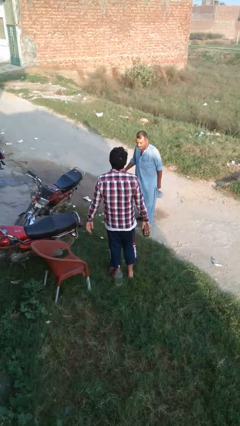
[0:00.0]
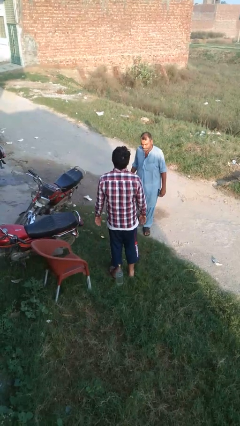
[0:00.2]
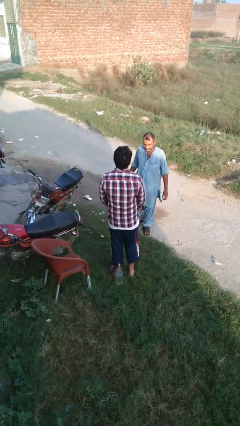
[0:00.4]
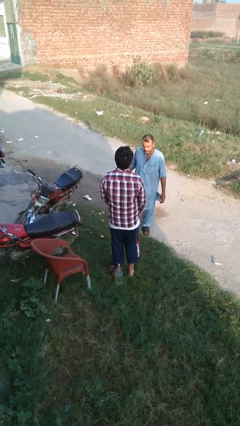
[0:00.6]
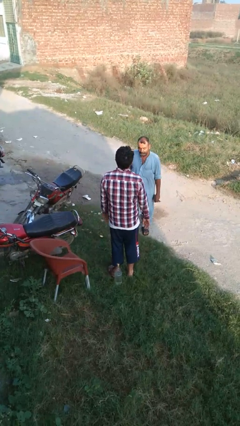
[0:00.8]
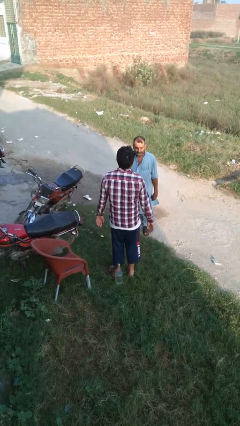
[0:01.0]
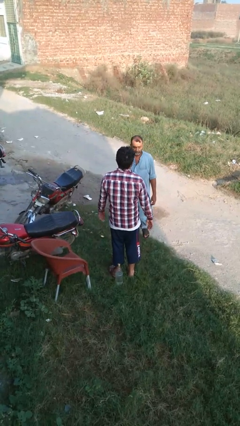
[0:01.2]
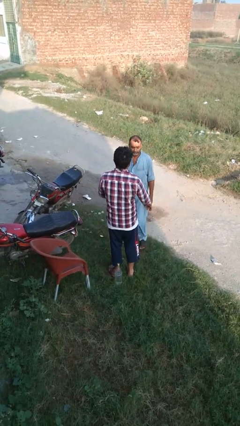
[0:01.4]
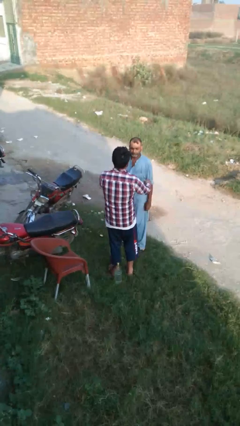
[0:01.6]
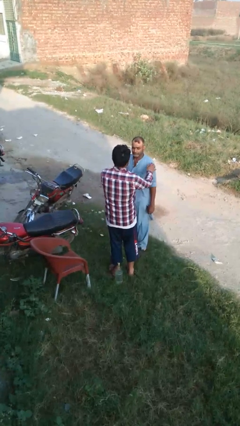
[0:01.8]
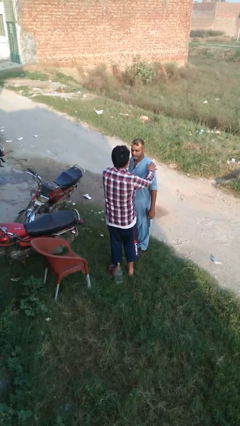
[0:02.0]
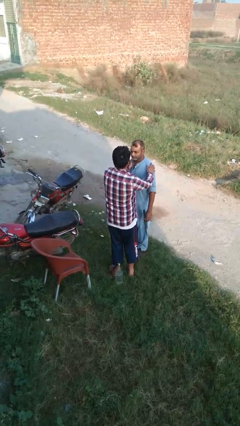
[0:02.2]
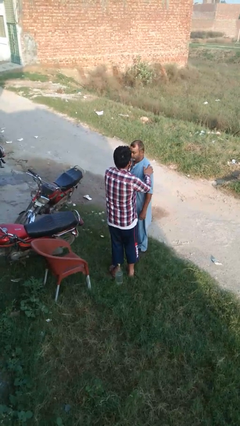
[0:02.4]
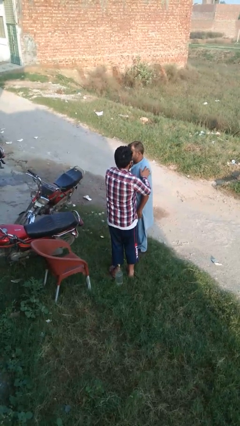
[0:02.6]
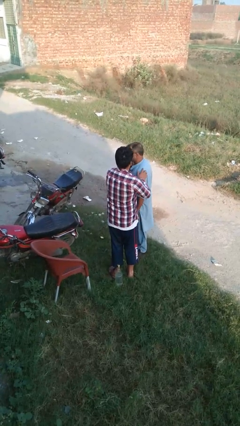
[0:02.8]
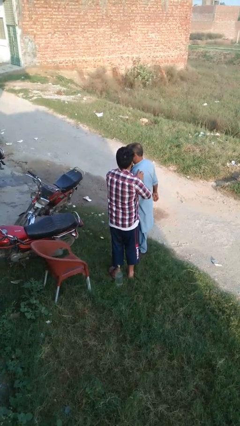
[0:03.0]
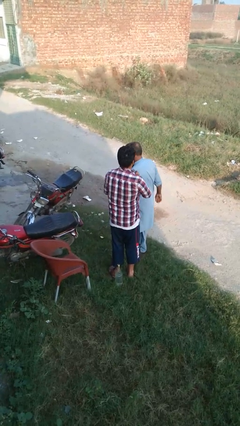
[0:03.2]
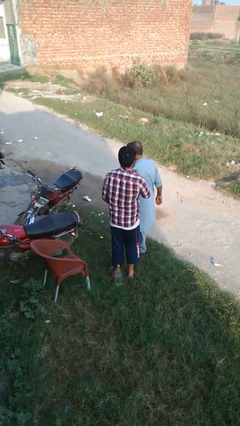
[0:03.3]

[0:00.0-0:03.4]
person grabs person by shoulder

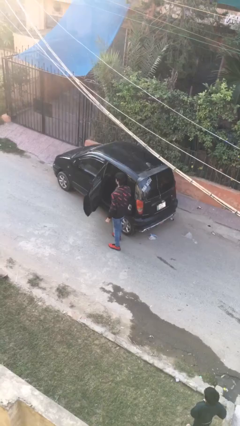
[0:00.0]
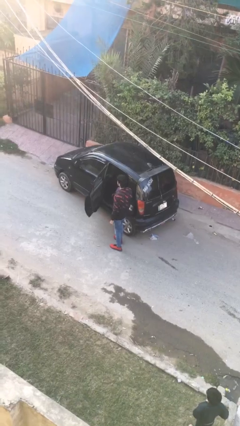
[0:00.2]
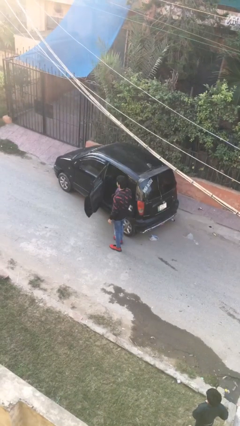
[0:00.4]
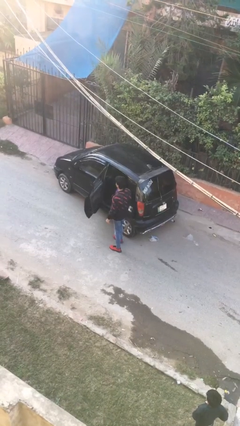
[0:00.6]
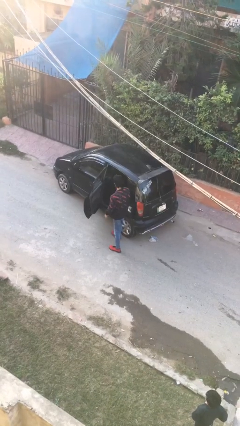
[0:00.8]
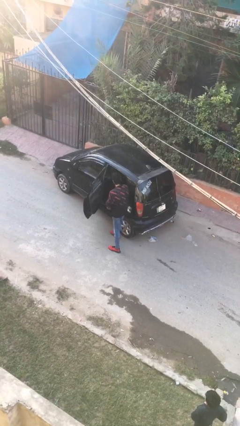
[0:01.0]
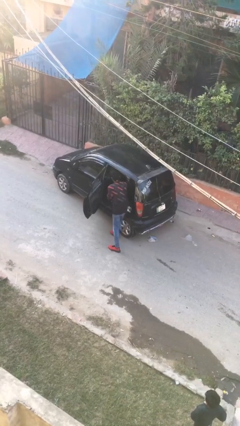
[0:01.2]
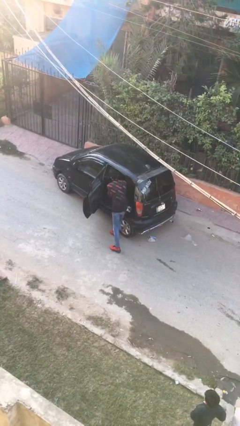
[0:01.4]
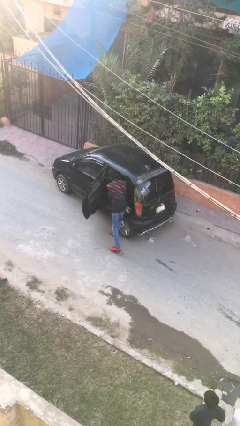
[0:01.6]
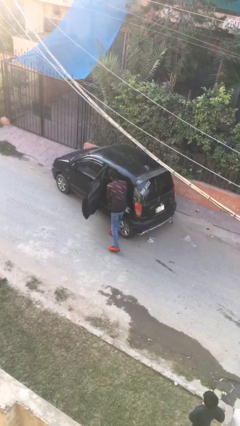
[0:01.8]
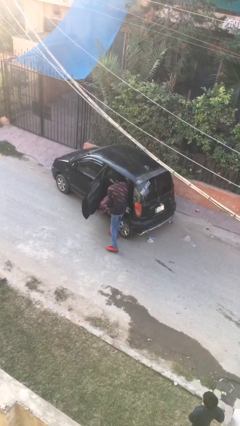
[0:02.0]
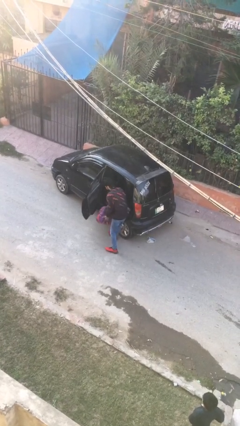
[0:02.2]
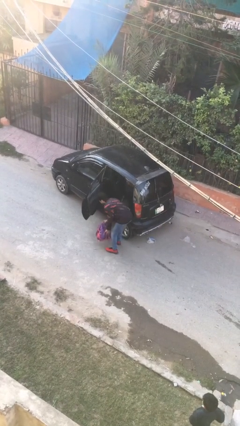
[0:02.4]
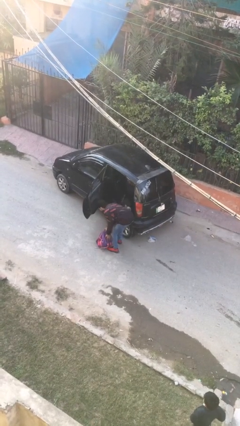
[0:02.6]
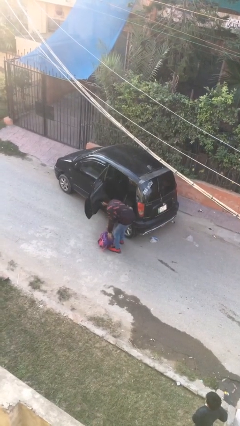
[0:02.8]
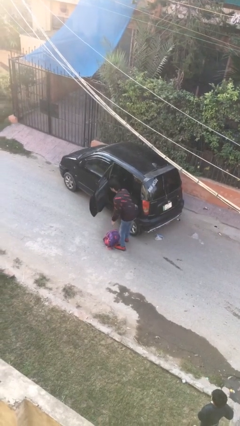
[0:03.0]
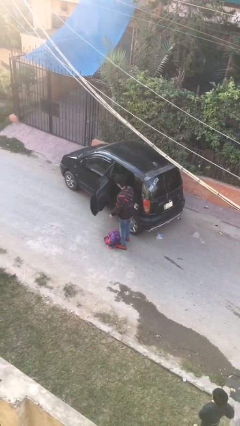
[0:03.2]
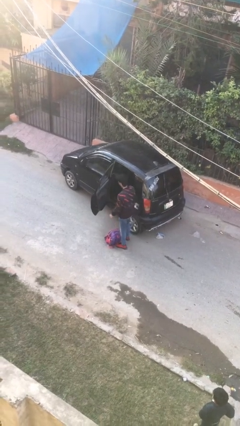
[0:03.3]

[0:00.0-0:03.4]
person unloads car

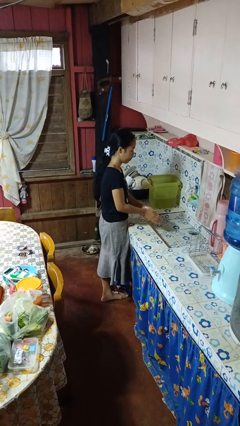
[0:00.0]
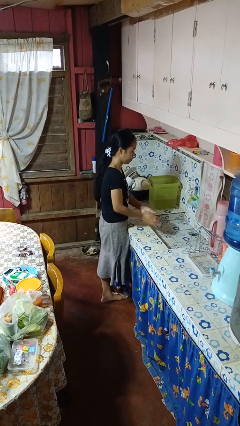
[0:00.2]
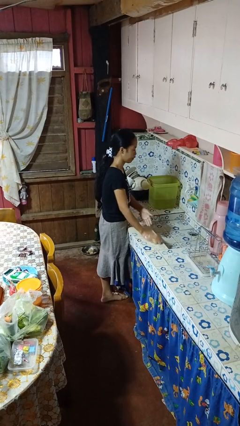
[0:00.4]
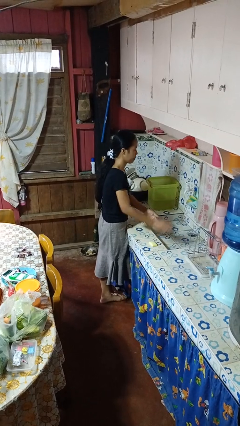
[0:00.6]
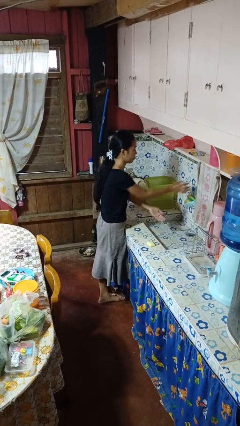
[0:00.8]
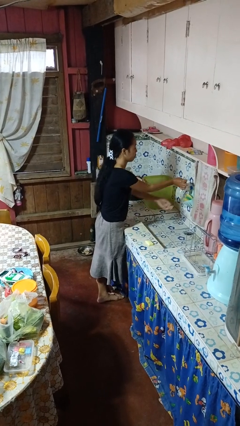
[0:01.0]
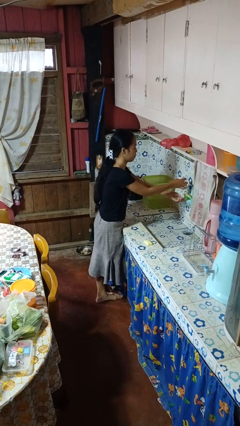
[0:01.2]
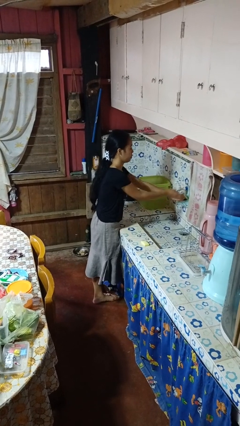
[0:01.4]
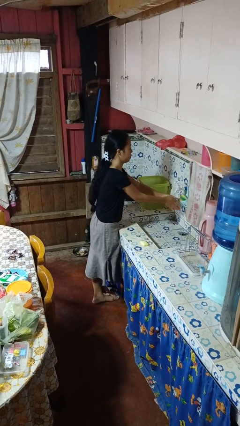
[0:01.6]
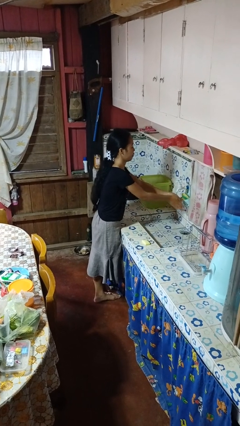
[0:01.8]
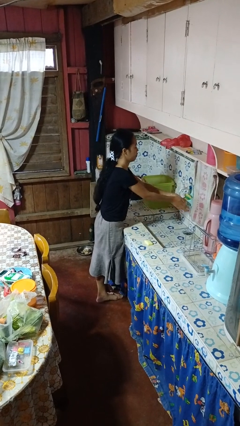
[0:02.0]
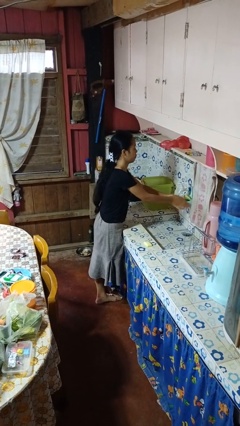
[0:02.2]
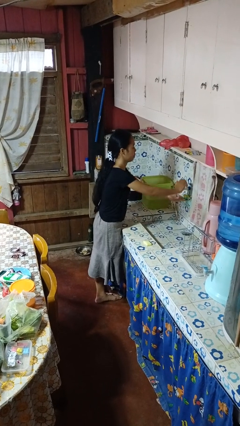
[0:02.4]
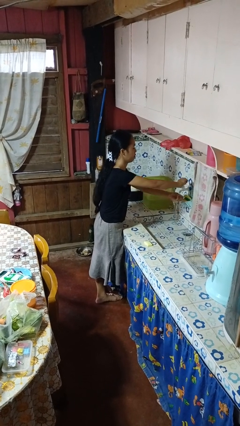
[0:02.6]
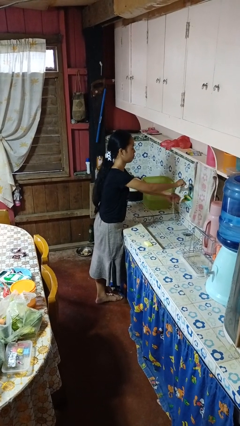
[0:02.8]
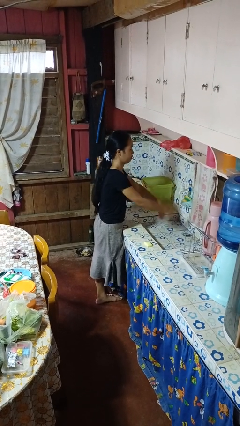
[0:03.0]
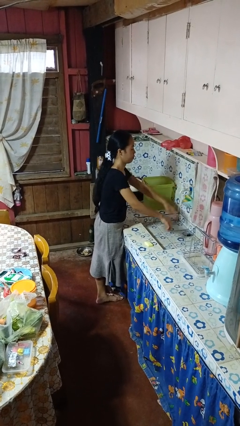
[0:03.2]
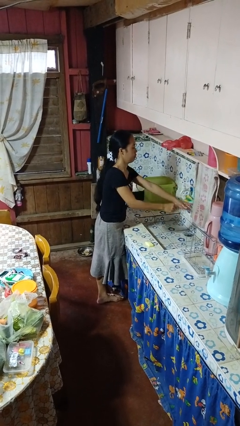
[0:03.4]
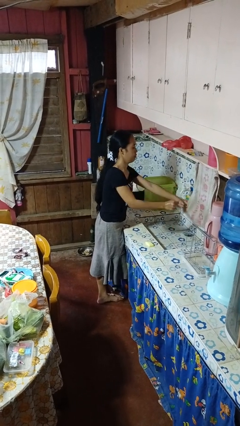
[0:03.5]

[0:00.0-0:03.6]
person washes hands

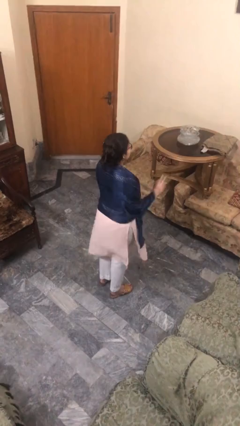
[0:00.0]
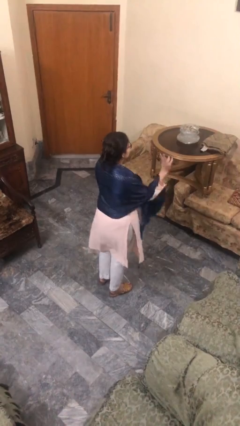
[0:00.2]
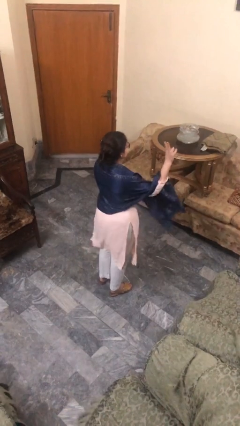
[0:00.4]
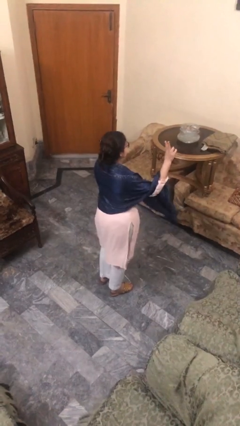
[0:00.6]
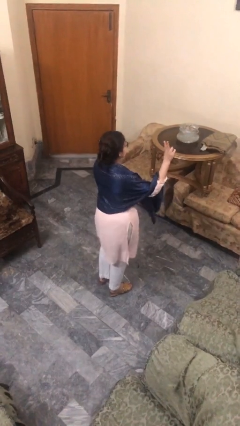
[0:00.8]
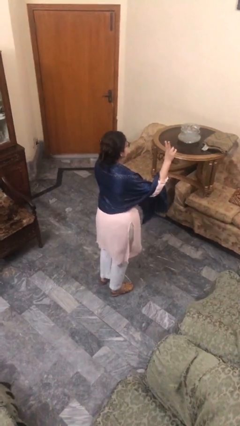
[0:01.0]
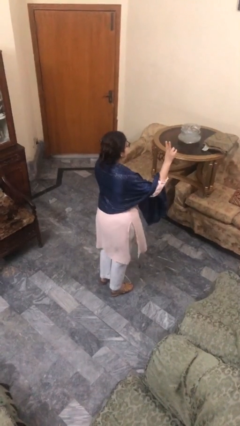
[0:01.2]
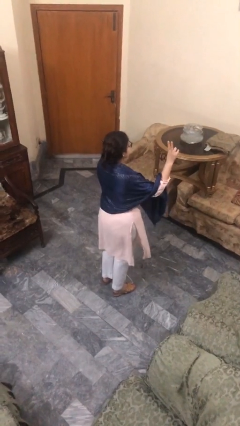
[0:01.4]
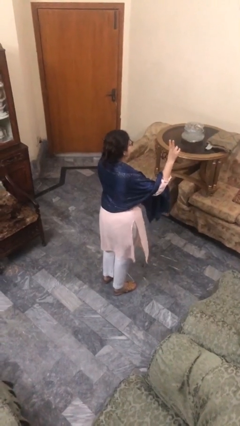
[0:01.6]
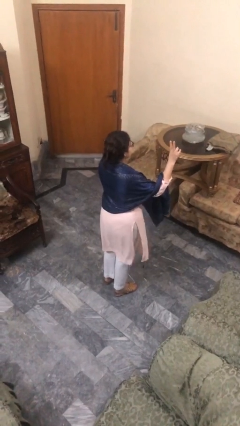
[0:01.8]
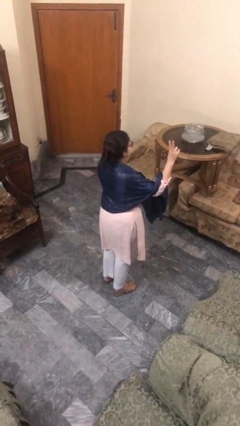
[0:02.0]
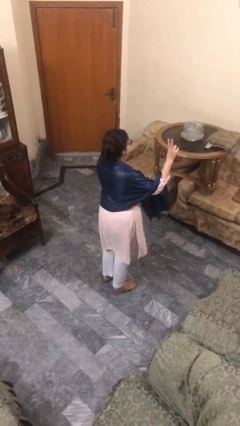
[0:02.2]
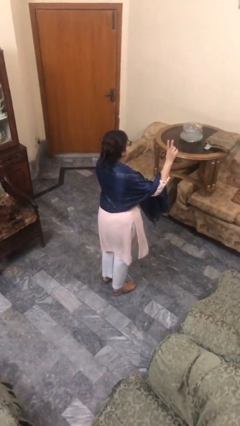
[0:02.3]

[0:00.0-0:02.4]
person gestures peace

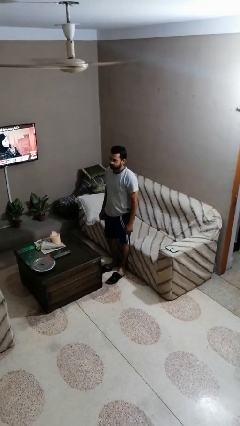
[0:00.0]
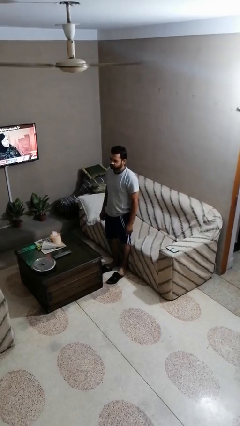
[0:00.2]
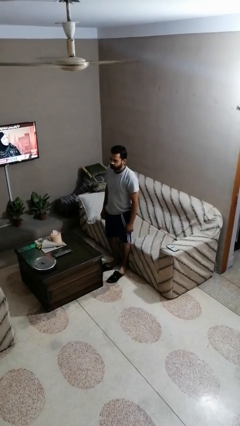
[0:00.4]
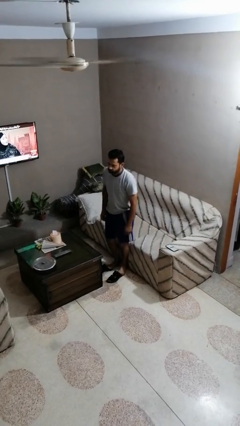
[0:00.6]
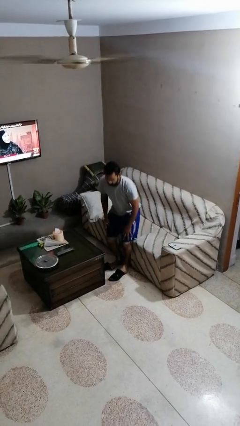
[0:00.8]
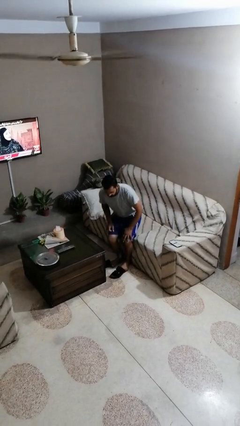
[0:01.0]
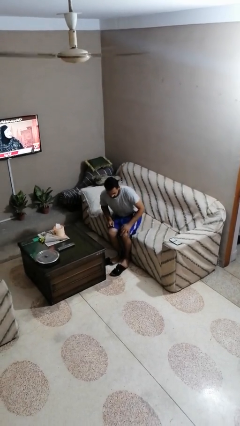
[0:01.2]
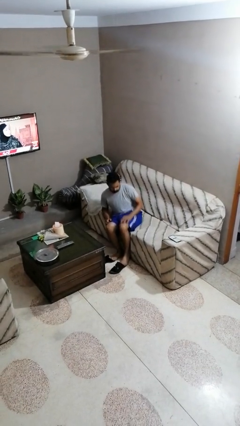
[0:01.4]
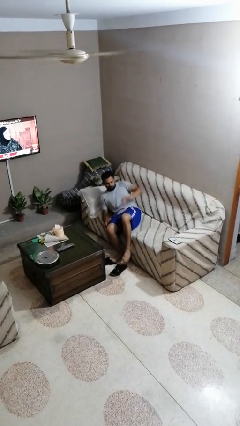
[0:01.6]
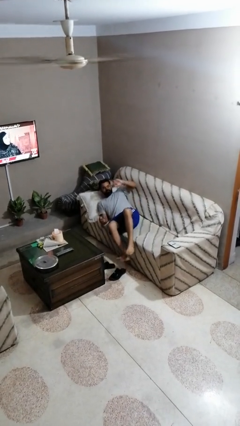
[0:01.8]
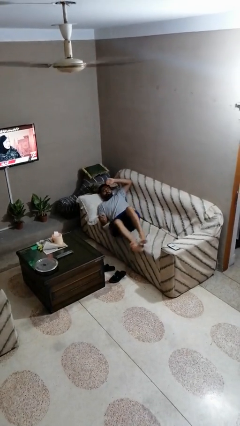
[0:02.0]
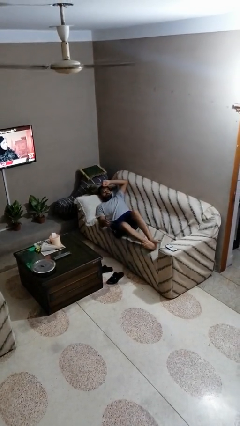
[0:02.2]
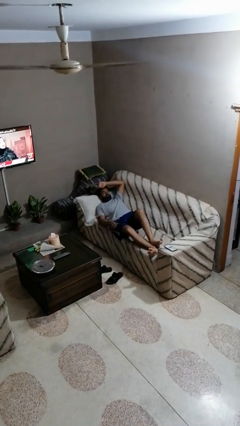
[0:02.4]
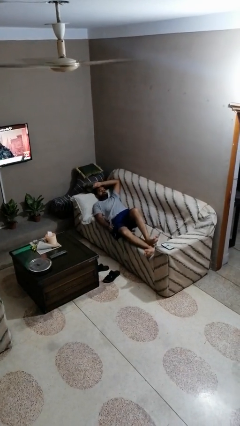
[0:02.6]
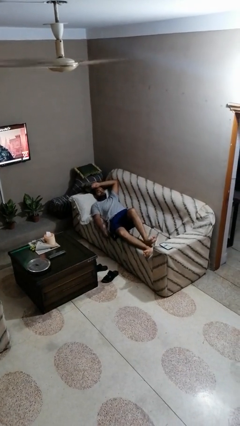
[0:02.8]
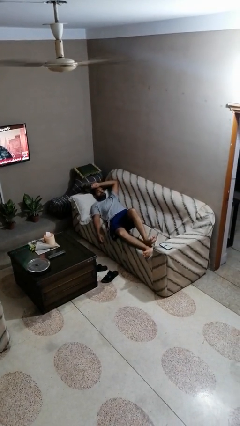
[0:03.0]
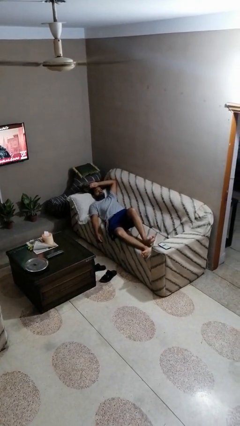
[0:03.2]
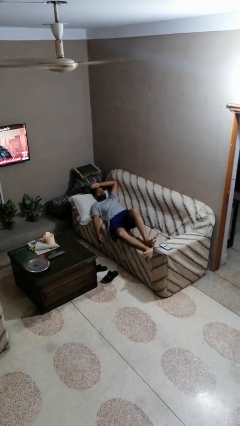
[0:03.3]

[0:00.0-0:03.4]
person lies down on couch

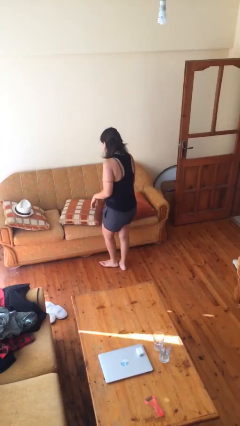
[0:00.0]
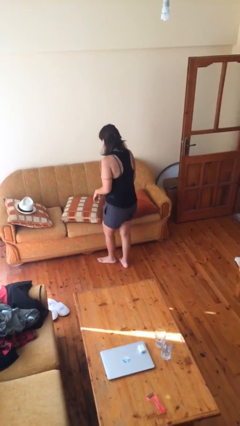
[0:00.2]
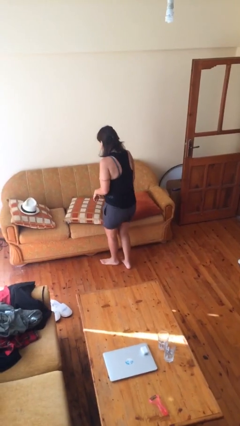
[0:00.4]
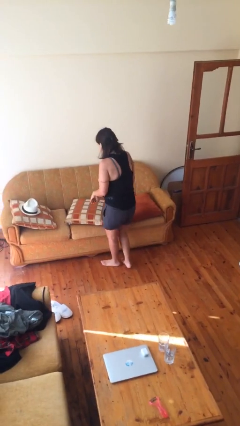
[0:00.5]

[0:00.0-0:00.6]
person searches in couch

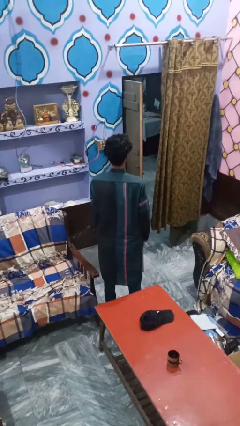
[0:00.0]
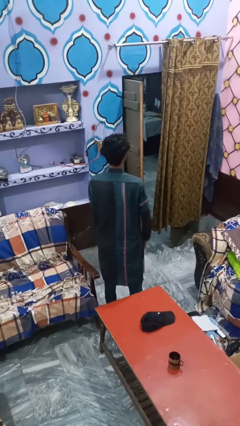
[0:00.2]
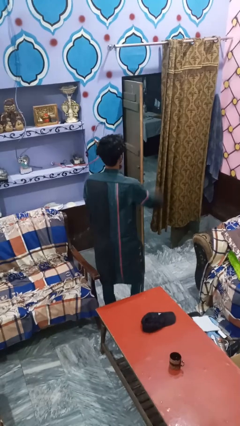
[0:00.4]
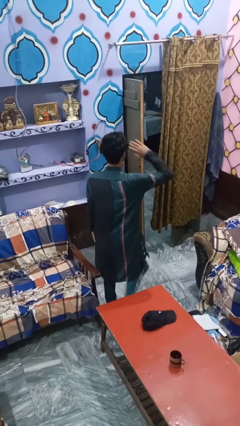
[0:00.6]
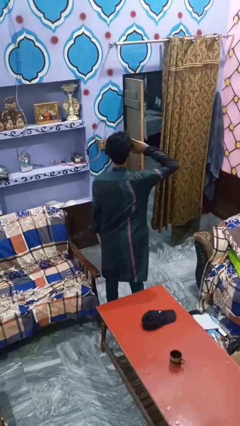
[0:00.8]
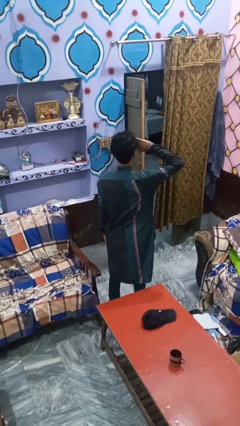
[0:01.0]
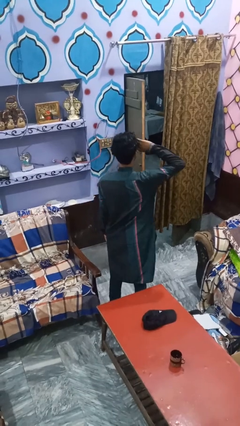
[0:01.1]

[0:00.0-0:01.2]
person salutes
